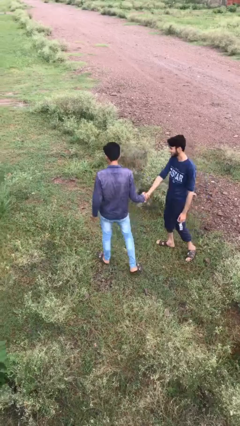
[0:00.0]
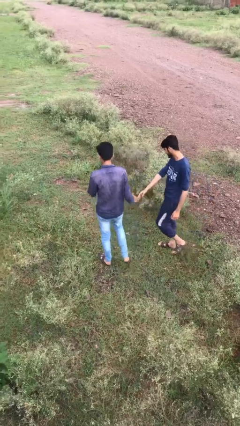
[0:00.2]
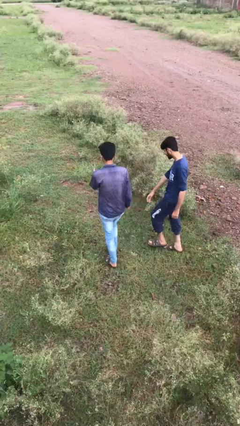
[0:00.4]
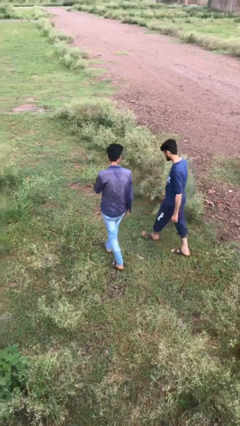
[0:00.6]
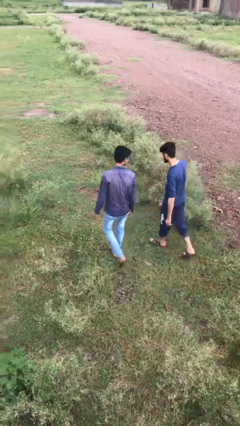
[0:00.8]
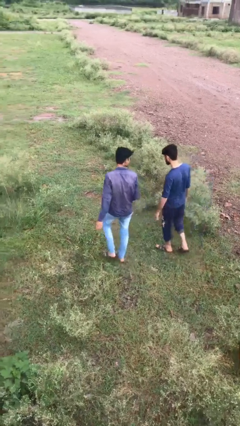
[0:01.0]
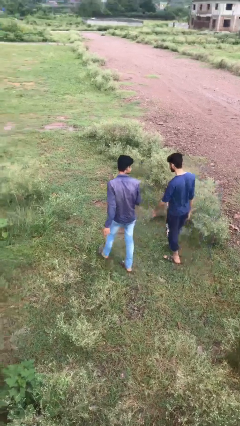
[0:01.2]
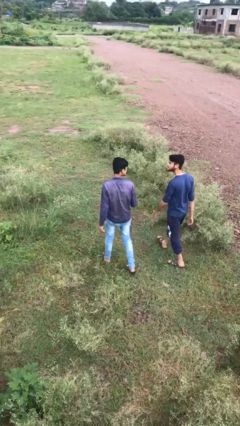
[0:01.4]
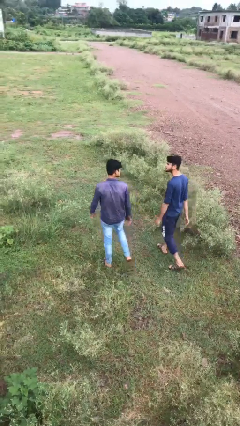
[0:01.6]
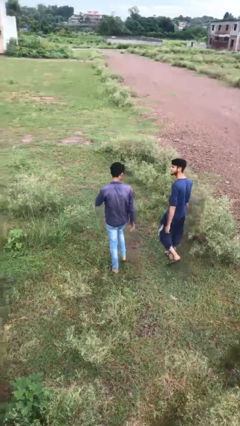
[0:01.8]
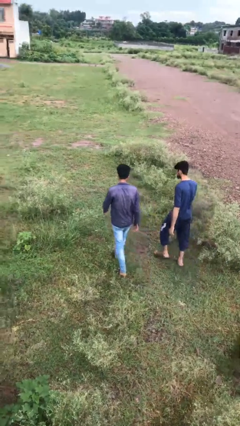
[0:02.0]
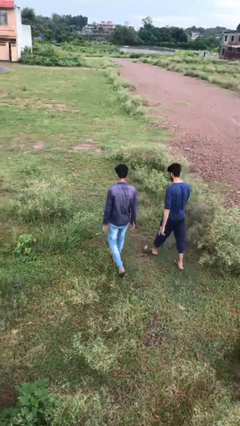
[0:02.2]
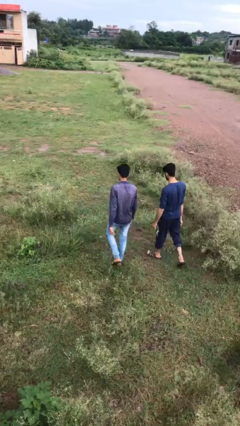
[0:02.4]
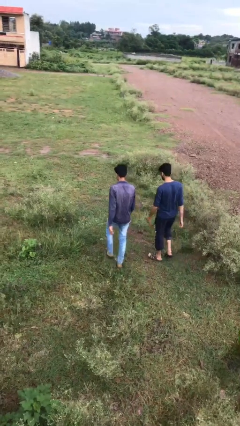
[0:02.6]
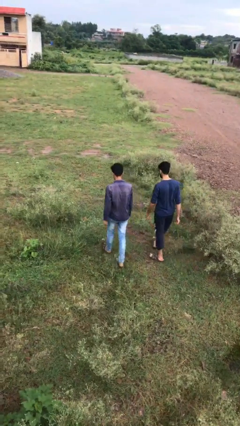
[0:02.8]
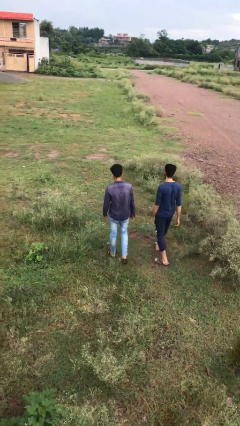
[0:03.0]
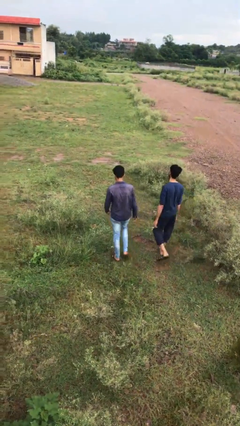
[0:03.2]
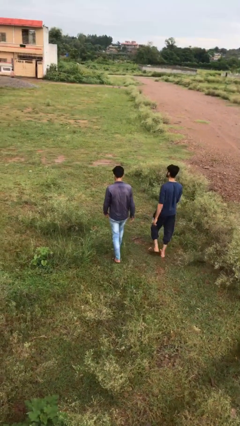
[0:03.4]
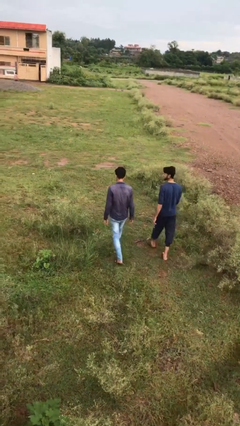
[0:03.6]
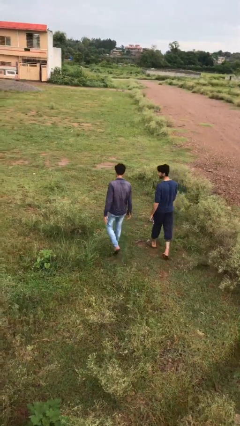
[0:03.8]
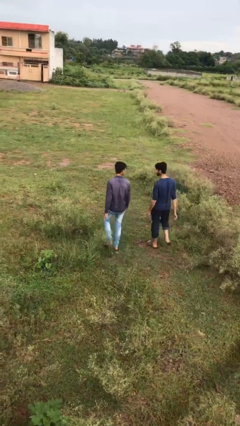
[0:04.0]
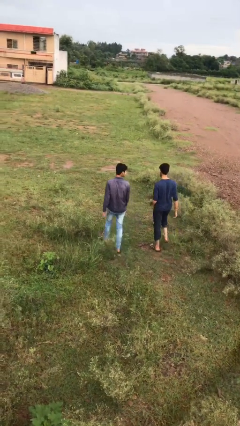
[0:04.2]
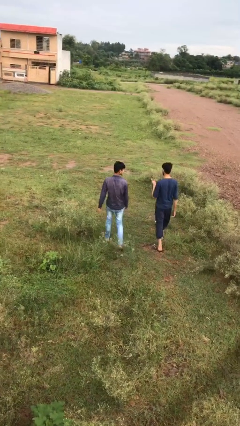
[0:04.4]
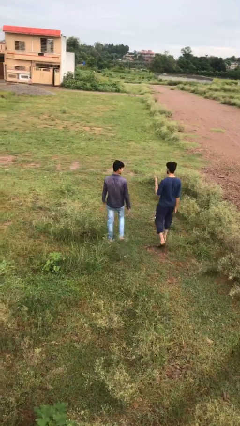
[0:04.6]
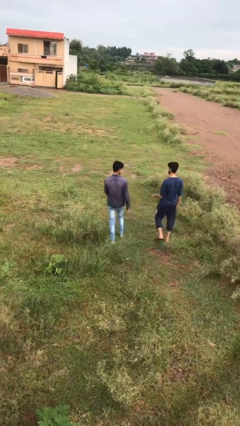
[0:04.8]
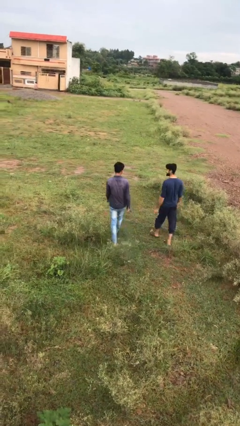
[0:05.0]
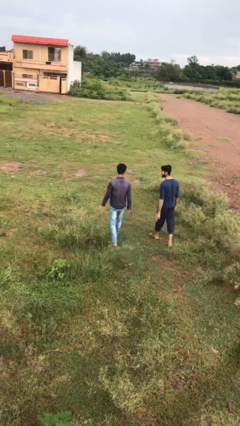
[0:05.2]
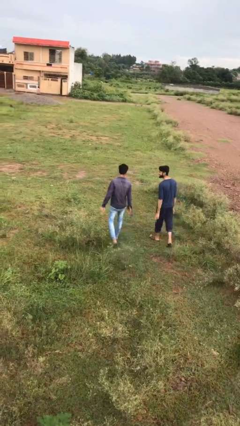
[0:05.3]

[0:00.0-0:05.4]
person talks to person

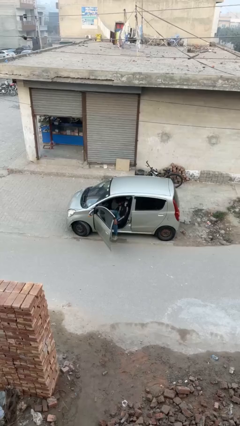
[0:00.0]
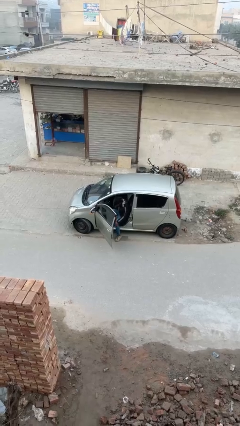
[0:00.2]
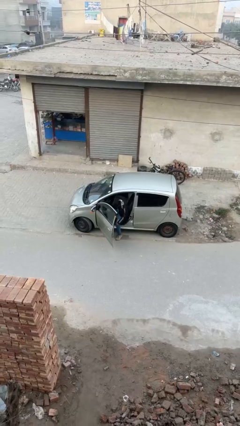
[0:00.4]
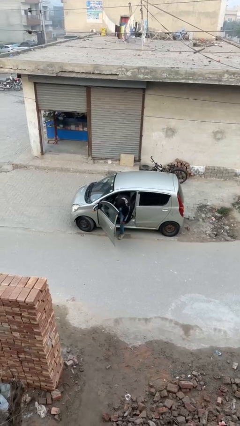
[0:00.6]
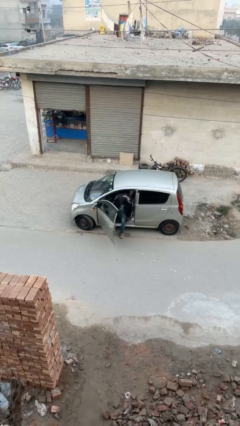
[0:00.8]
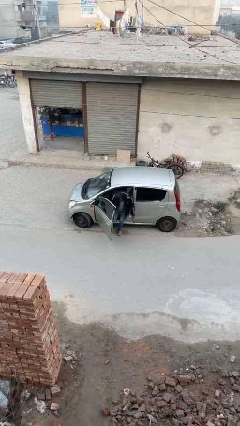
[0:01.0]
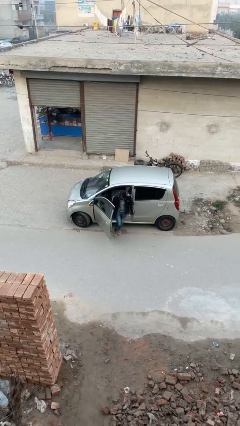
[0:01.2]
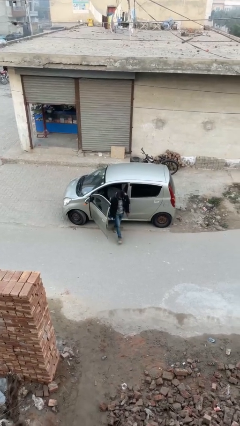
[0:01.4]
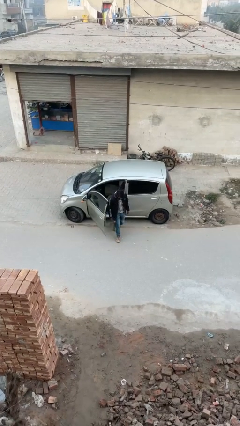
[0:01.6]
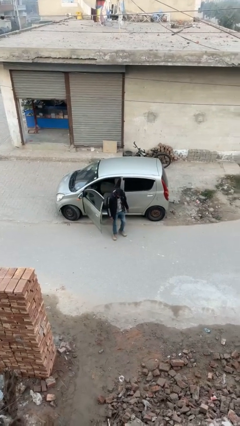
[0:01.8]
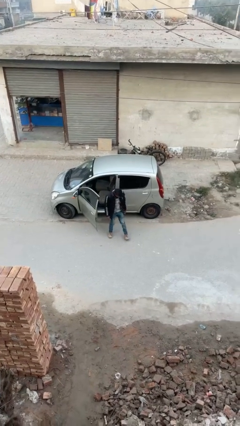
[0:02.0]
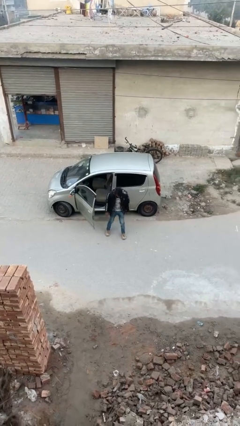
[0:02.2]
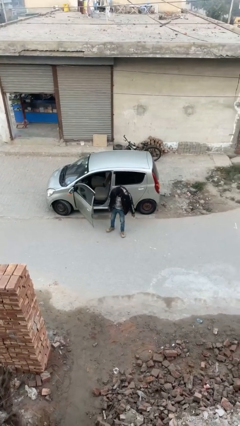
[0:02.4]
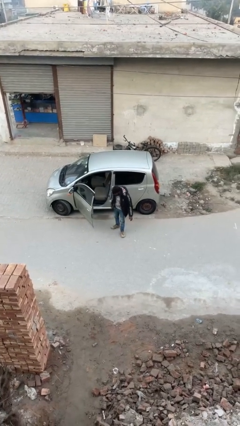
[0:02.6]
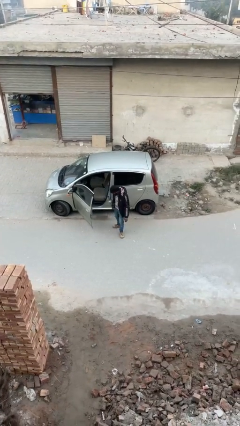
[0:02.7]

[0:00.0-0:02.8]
person exits car

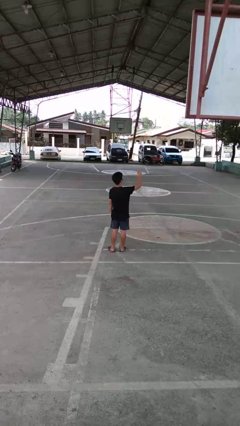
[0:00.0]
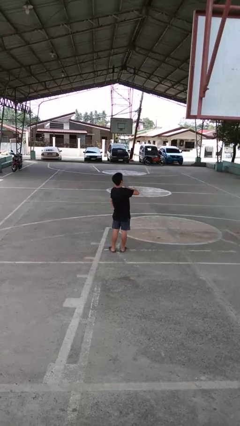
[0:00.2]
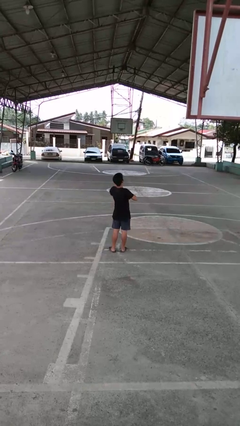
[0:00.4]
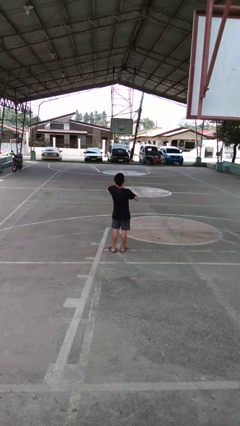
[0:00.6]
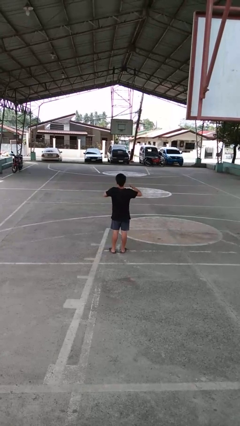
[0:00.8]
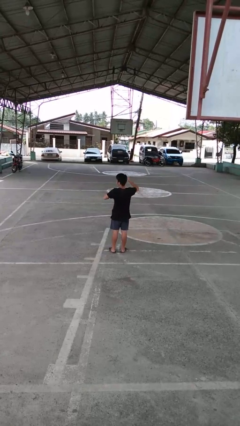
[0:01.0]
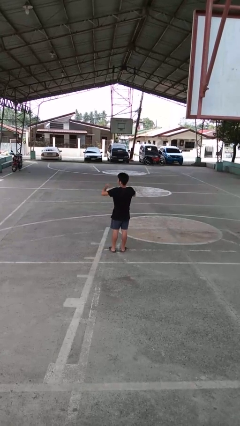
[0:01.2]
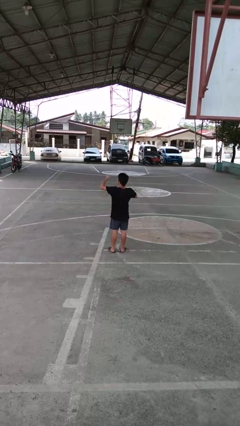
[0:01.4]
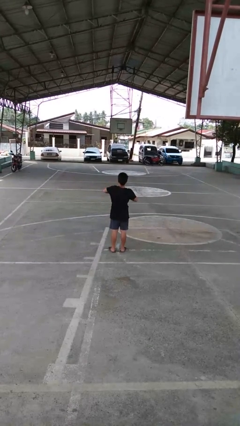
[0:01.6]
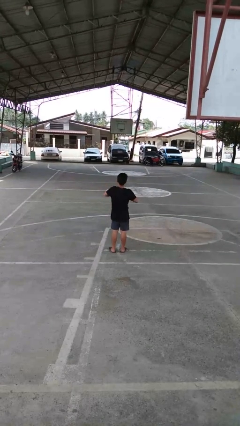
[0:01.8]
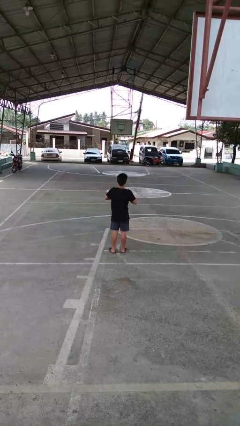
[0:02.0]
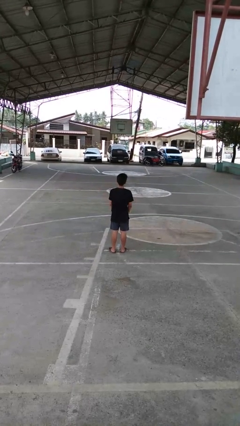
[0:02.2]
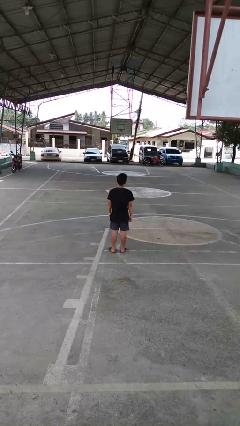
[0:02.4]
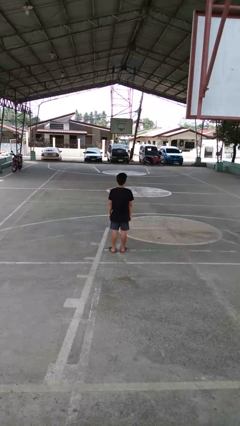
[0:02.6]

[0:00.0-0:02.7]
person drums on chest

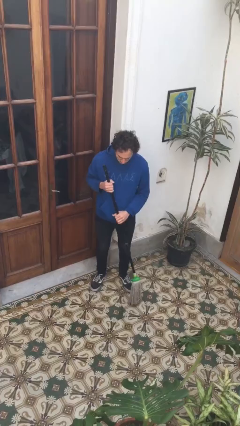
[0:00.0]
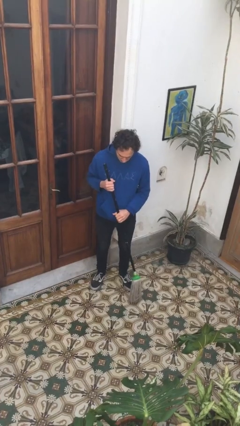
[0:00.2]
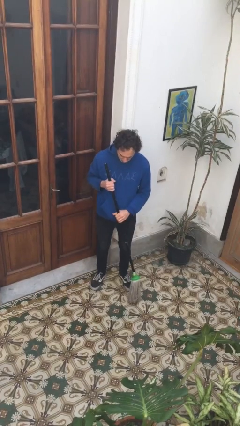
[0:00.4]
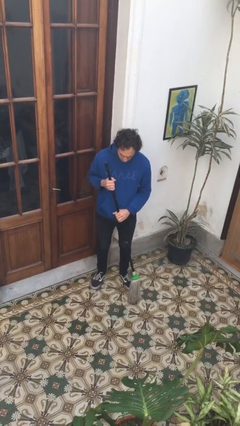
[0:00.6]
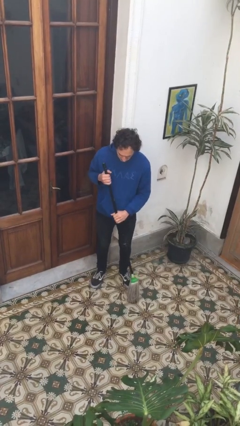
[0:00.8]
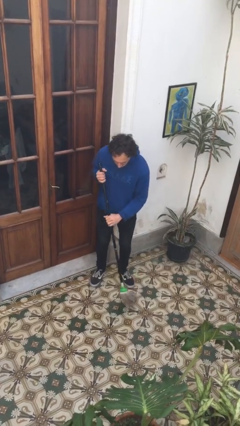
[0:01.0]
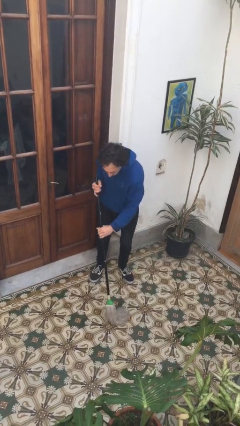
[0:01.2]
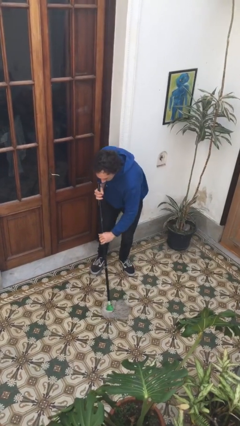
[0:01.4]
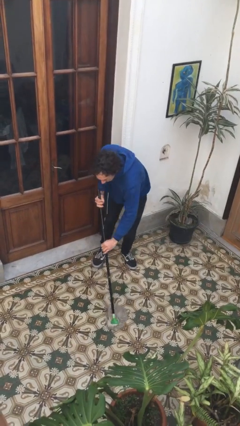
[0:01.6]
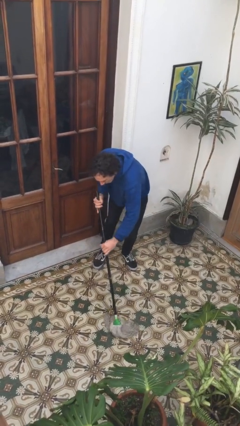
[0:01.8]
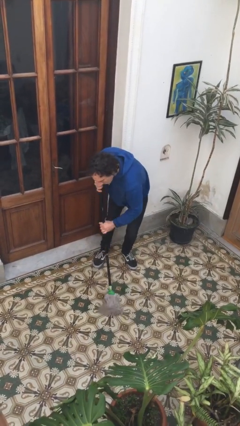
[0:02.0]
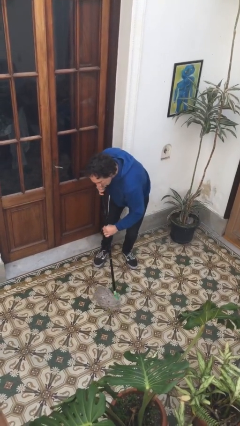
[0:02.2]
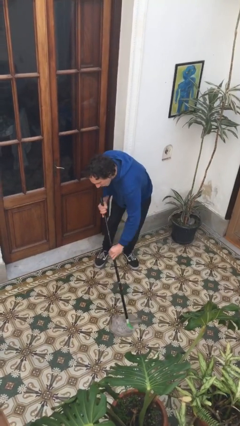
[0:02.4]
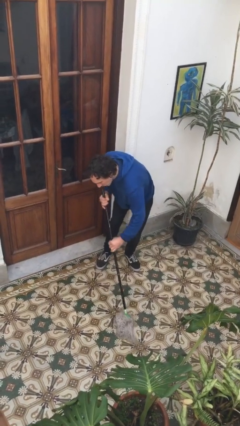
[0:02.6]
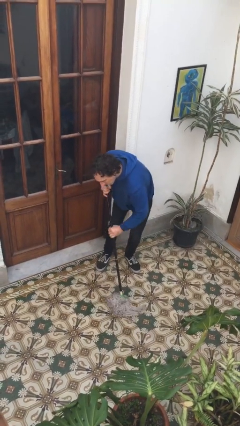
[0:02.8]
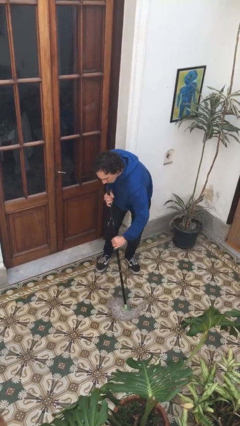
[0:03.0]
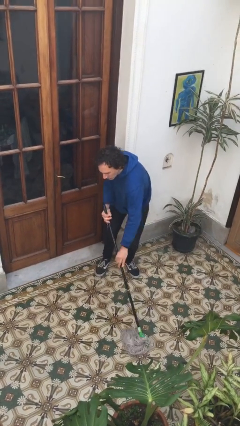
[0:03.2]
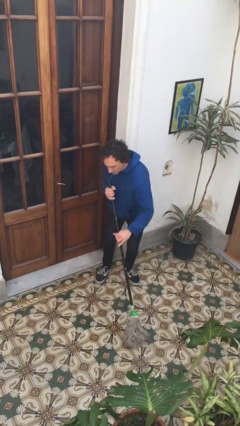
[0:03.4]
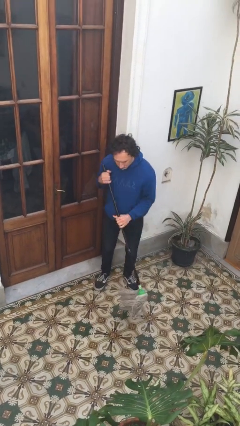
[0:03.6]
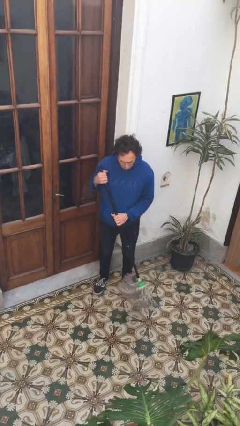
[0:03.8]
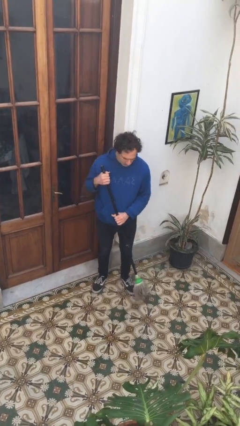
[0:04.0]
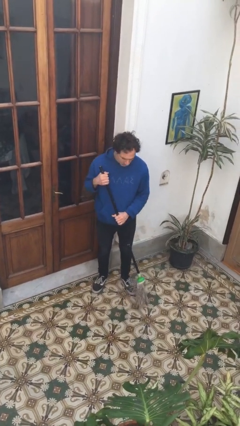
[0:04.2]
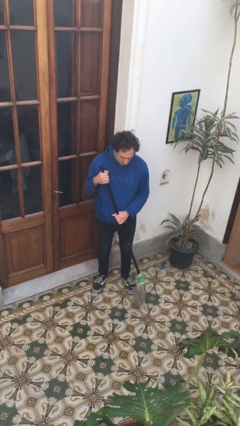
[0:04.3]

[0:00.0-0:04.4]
person mops

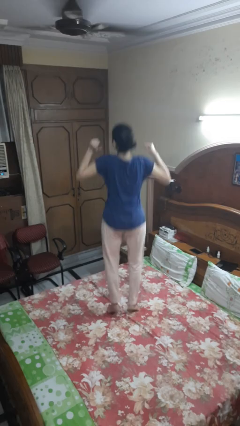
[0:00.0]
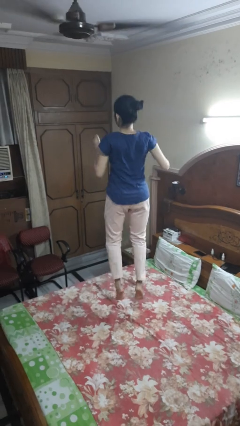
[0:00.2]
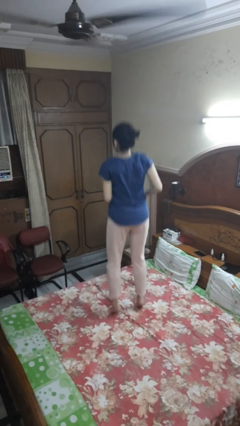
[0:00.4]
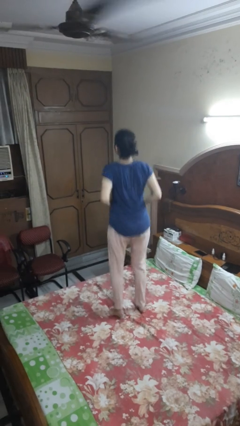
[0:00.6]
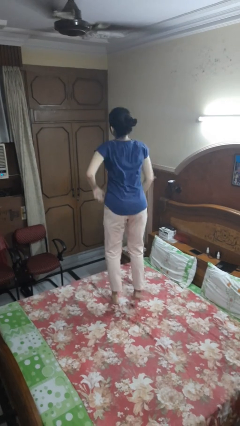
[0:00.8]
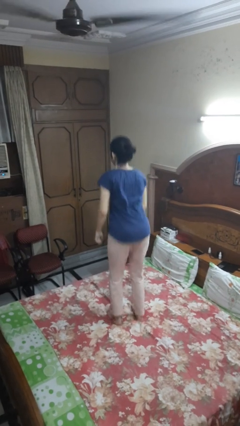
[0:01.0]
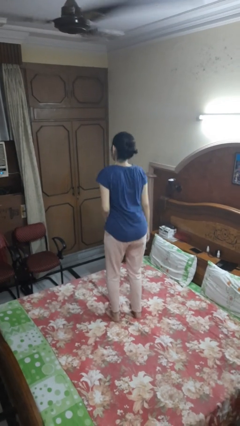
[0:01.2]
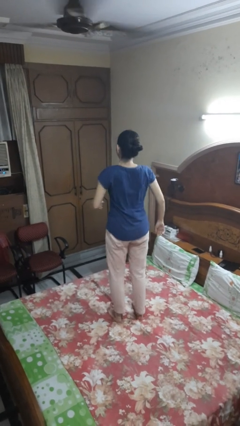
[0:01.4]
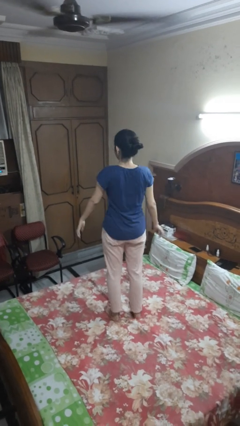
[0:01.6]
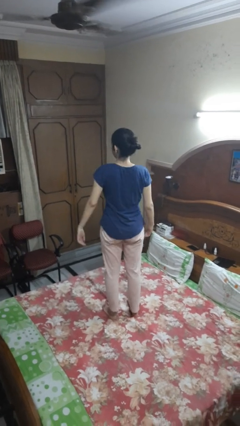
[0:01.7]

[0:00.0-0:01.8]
person jumps on bed

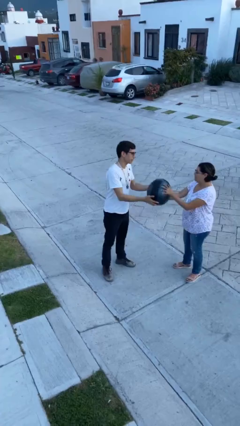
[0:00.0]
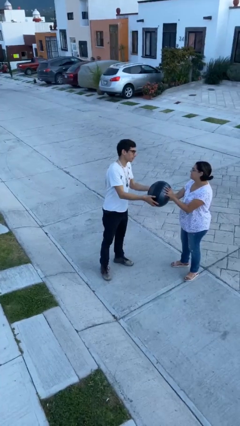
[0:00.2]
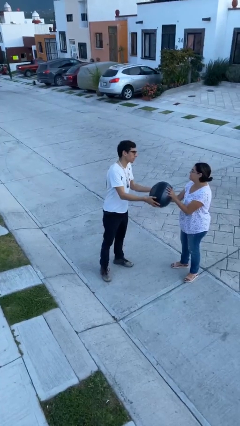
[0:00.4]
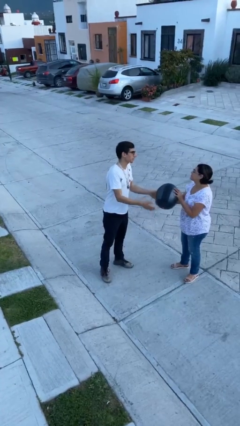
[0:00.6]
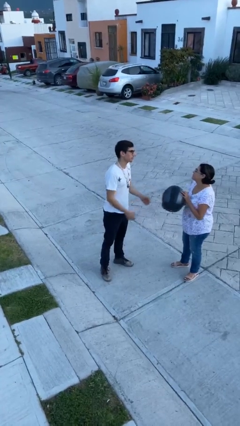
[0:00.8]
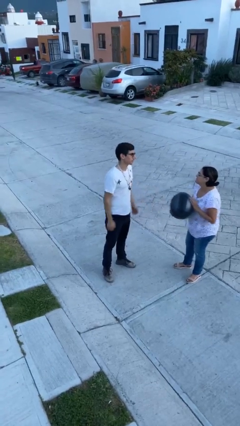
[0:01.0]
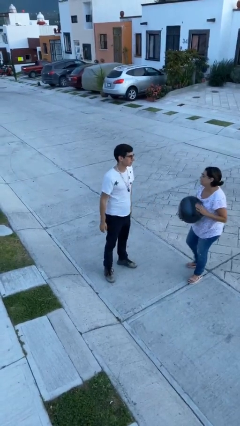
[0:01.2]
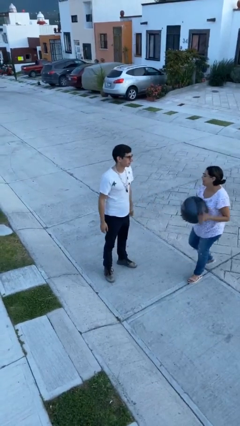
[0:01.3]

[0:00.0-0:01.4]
person transfers object to person
